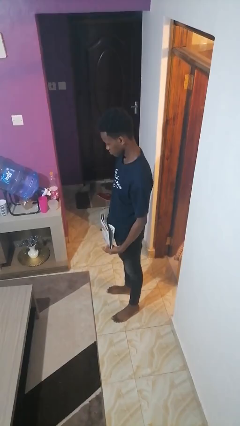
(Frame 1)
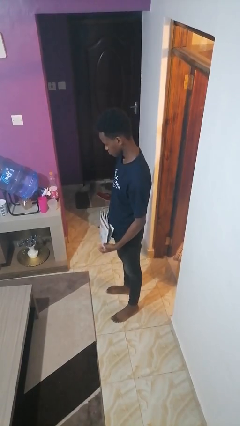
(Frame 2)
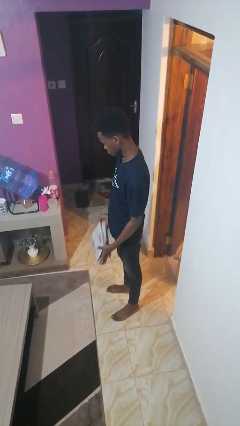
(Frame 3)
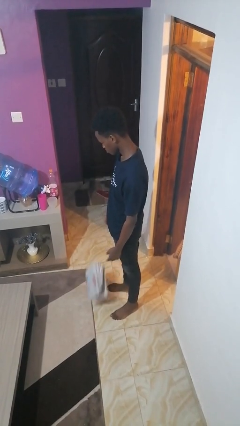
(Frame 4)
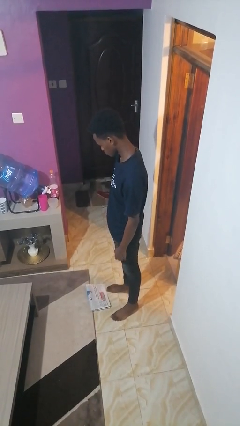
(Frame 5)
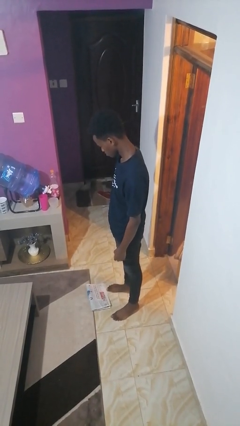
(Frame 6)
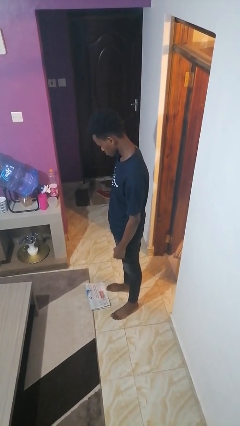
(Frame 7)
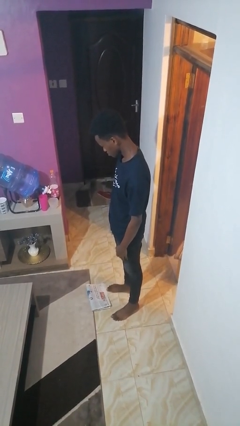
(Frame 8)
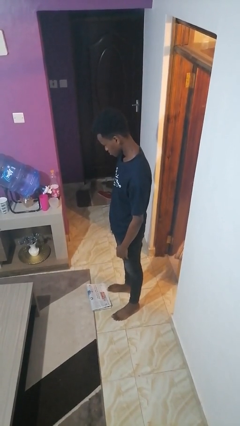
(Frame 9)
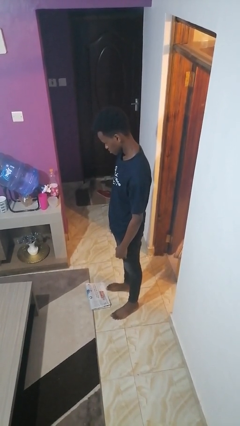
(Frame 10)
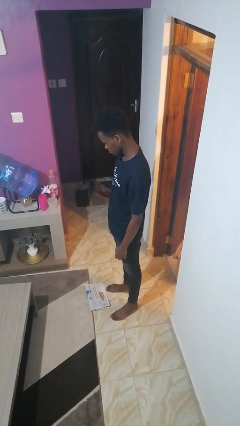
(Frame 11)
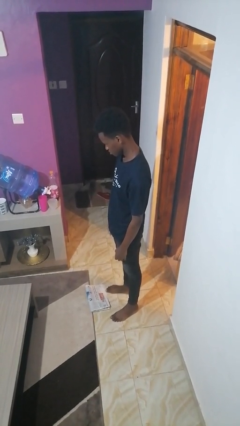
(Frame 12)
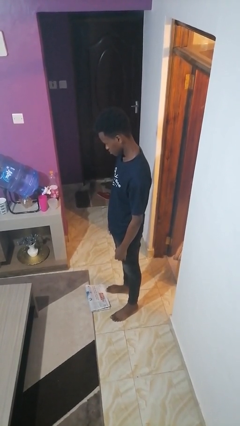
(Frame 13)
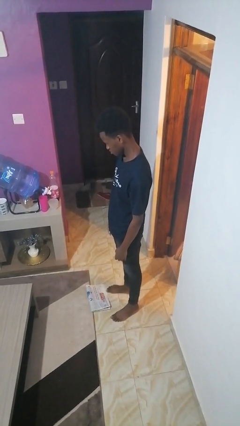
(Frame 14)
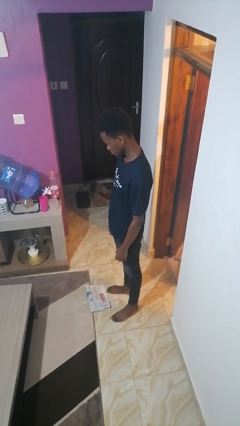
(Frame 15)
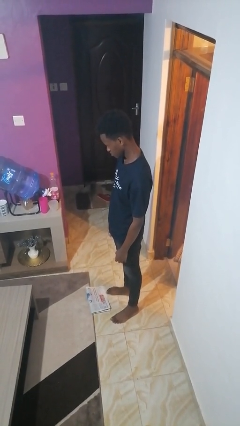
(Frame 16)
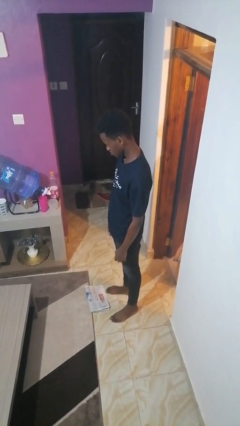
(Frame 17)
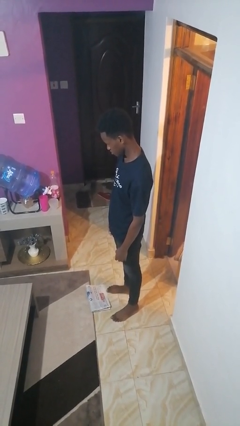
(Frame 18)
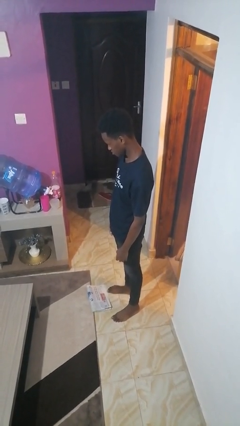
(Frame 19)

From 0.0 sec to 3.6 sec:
person drops object

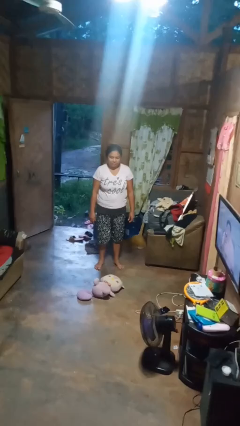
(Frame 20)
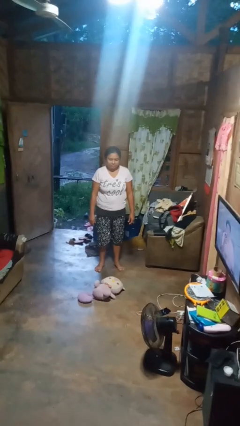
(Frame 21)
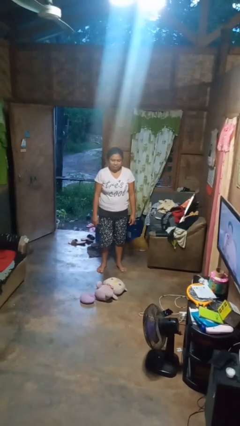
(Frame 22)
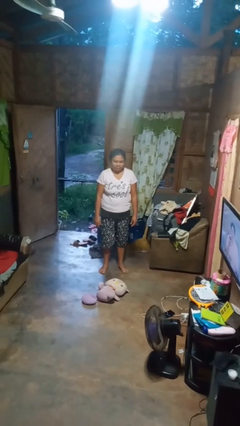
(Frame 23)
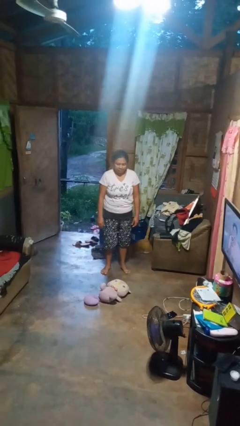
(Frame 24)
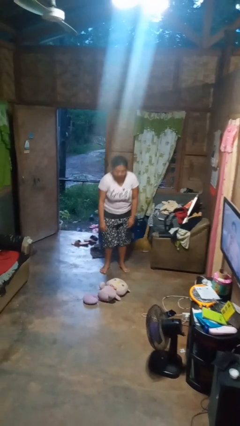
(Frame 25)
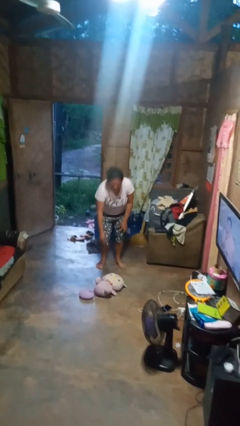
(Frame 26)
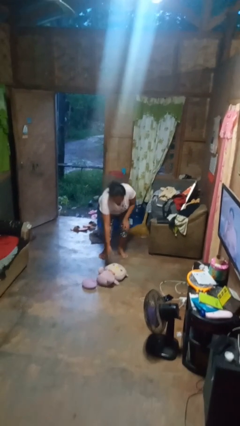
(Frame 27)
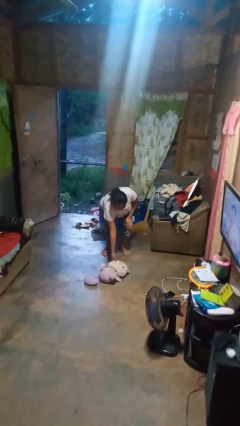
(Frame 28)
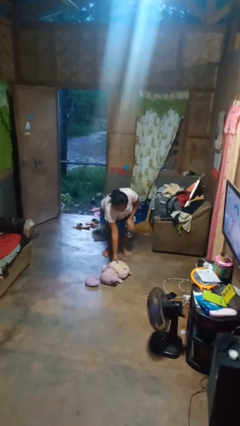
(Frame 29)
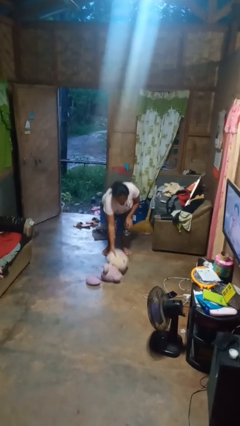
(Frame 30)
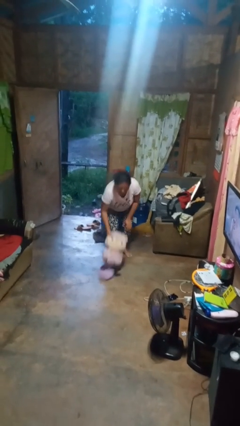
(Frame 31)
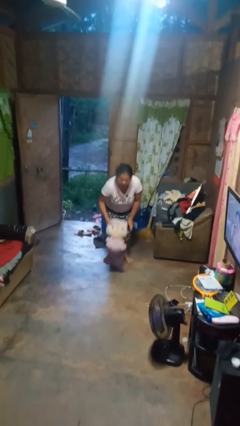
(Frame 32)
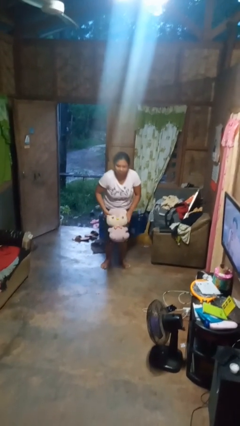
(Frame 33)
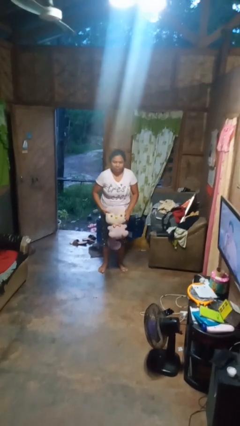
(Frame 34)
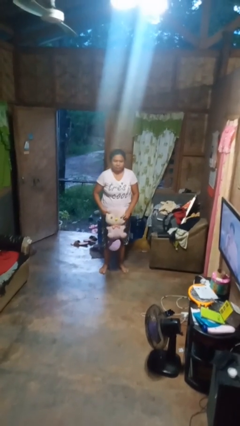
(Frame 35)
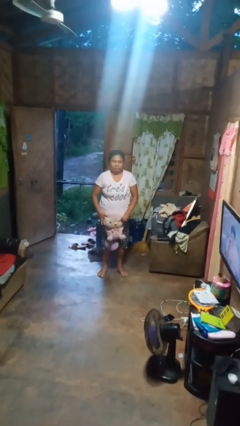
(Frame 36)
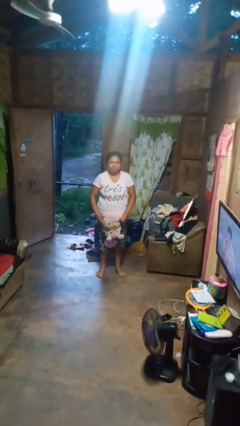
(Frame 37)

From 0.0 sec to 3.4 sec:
person picks up object from floor

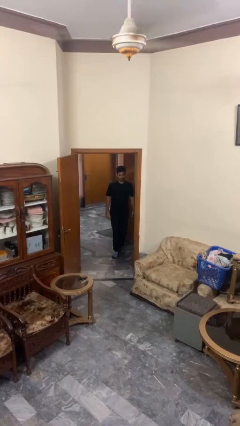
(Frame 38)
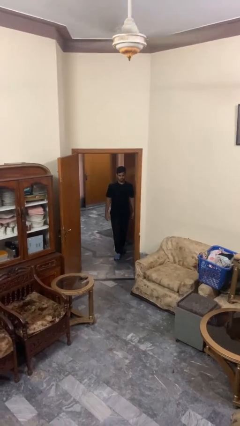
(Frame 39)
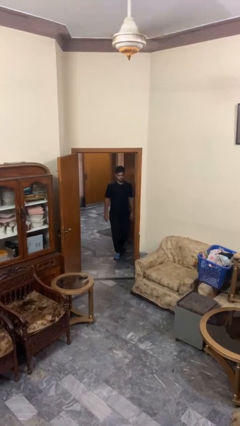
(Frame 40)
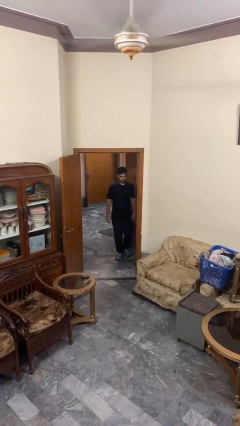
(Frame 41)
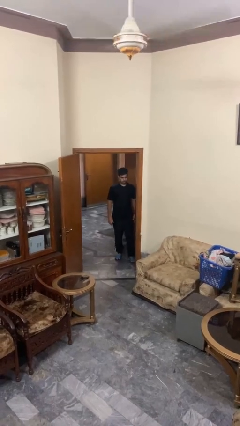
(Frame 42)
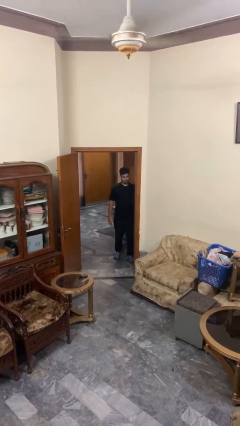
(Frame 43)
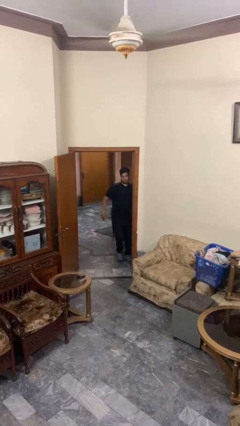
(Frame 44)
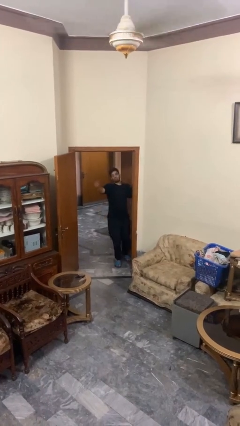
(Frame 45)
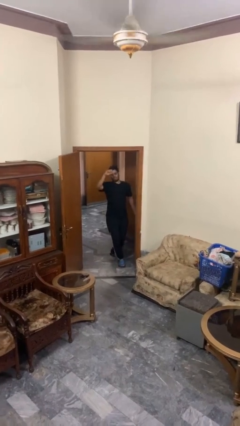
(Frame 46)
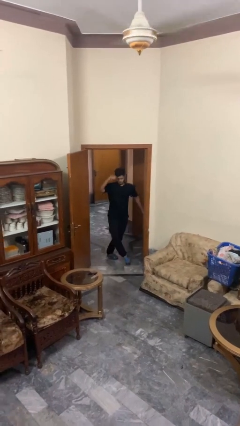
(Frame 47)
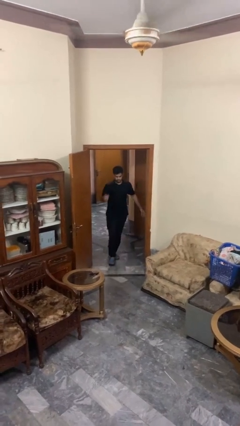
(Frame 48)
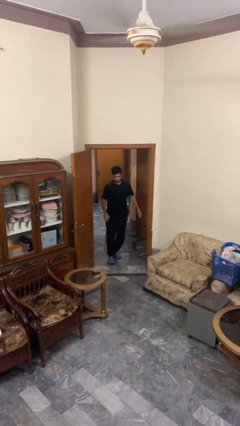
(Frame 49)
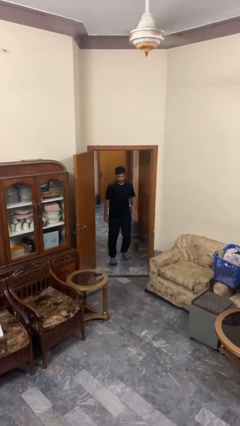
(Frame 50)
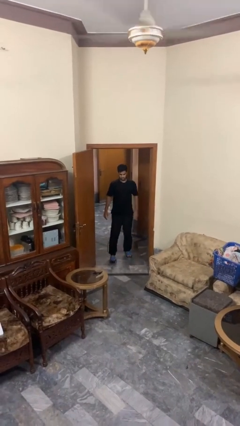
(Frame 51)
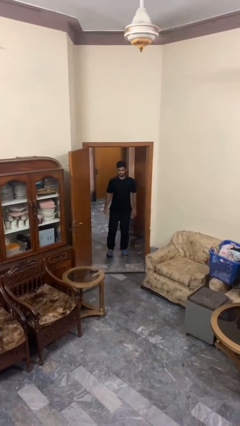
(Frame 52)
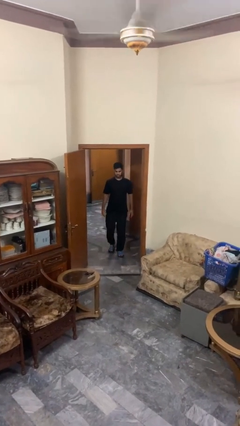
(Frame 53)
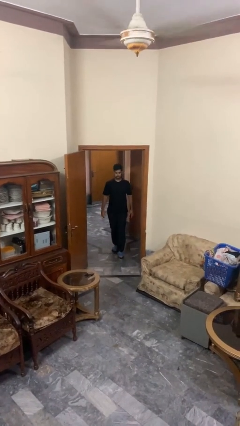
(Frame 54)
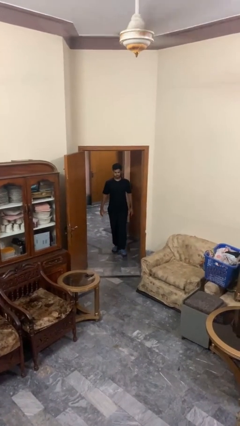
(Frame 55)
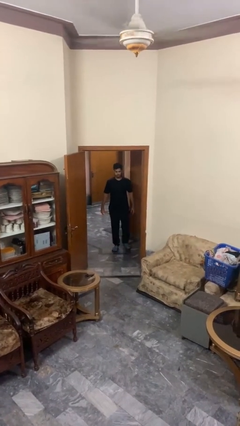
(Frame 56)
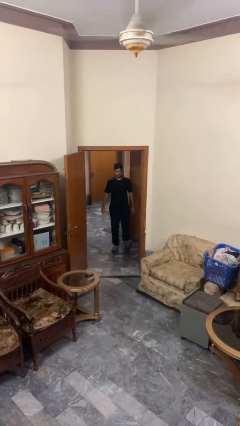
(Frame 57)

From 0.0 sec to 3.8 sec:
person bumps into wall

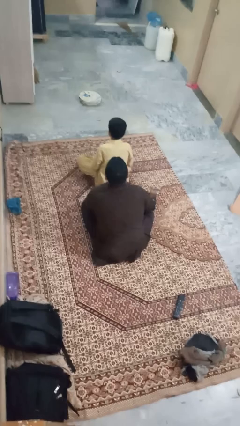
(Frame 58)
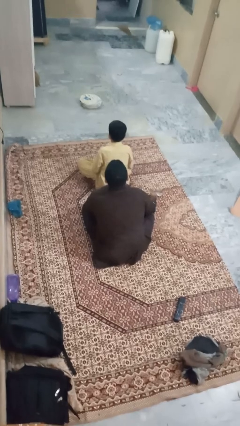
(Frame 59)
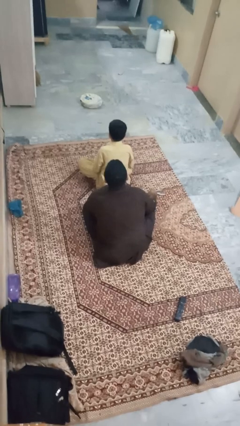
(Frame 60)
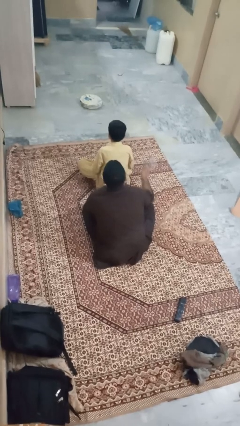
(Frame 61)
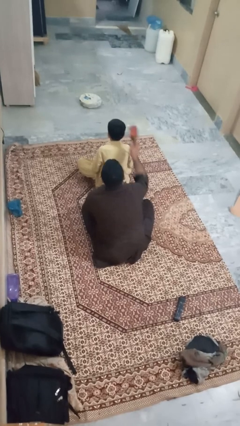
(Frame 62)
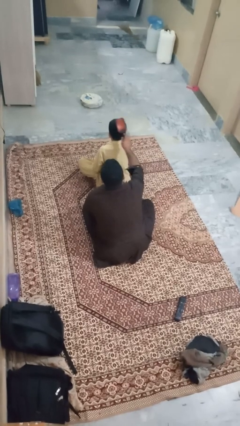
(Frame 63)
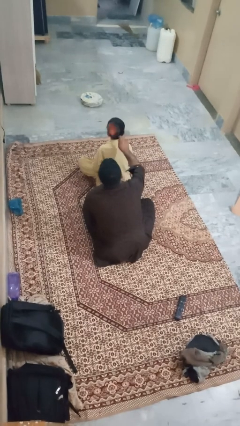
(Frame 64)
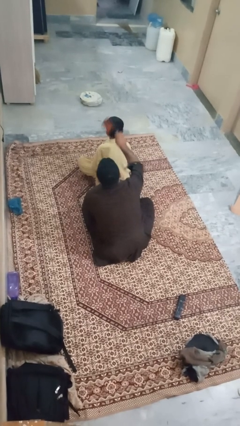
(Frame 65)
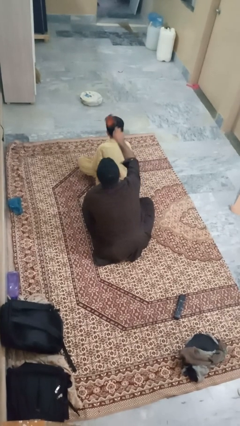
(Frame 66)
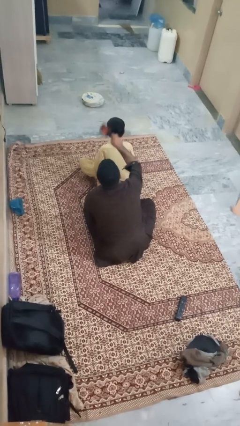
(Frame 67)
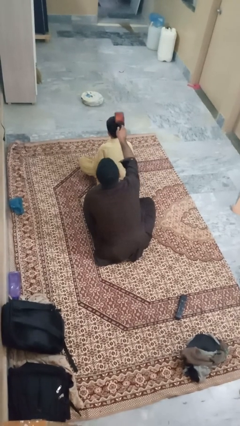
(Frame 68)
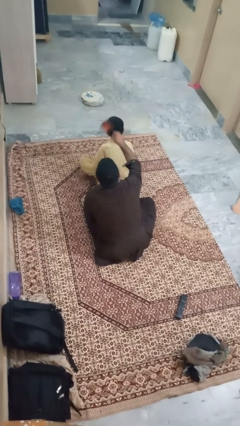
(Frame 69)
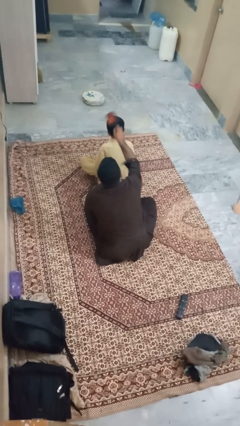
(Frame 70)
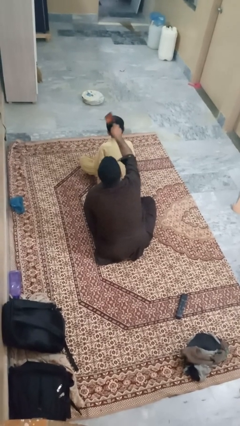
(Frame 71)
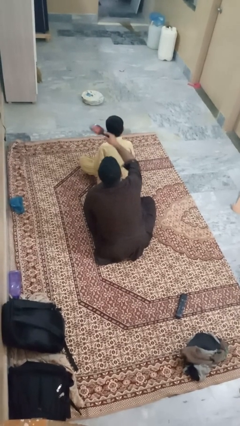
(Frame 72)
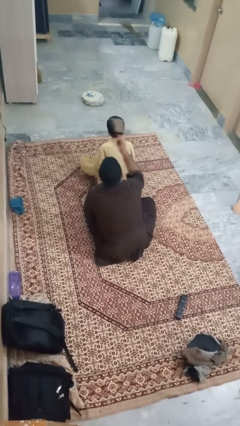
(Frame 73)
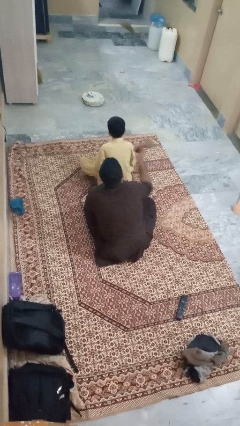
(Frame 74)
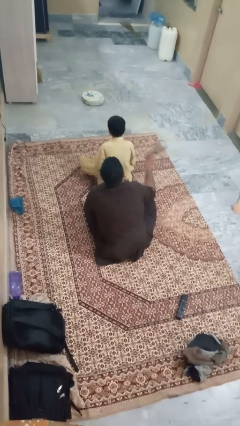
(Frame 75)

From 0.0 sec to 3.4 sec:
person brushes hair of person

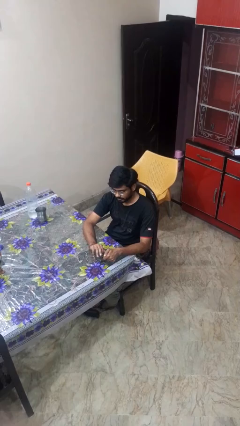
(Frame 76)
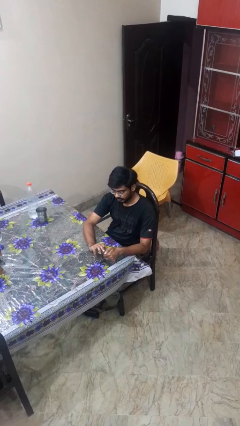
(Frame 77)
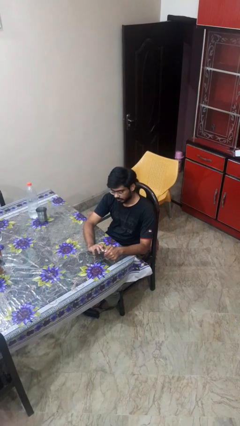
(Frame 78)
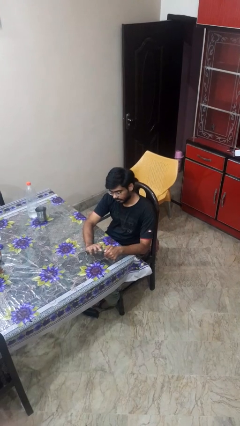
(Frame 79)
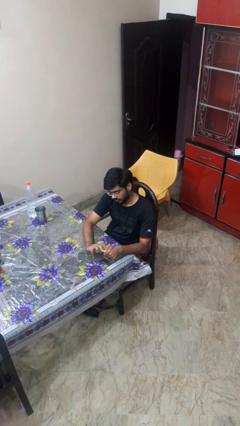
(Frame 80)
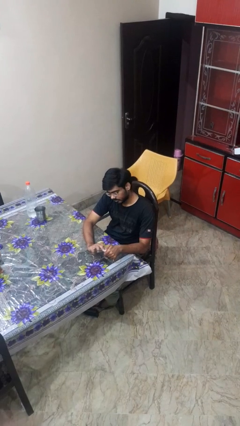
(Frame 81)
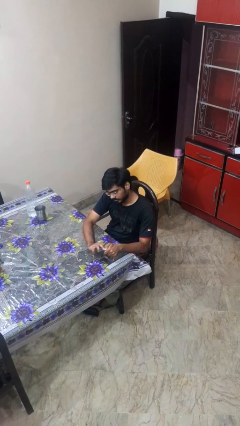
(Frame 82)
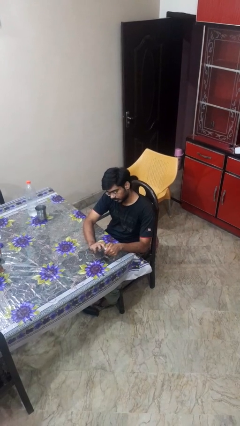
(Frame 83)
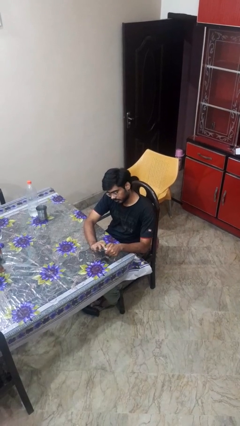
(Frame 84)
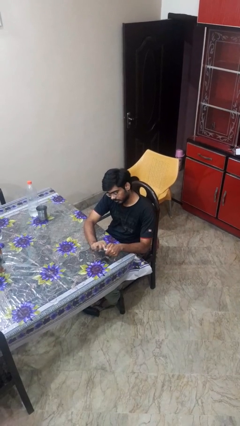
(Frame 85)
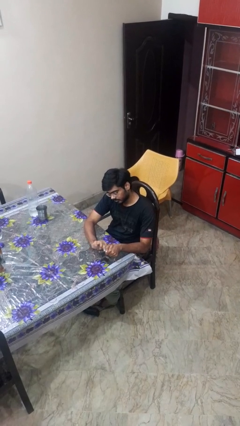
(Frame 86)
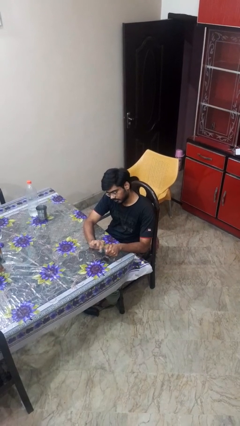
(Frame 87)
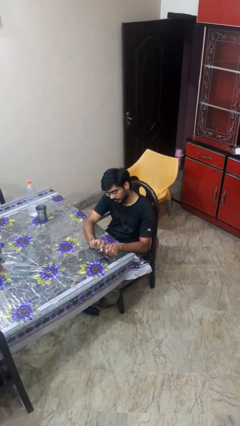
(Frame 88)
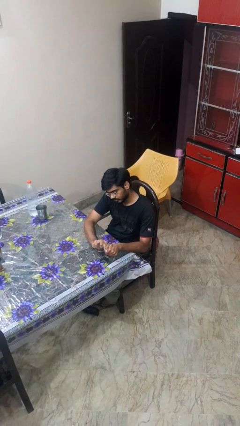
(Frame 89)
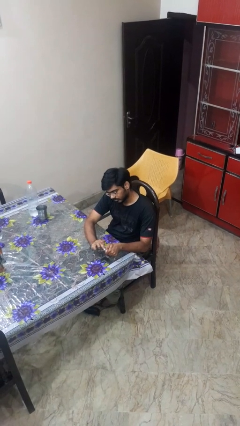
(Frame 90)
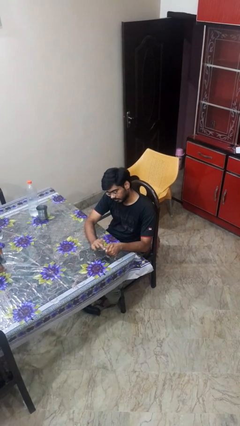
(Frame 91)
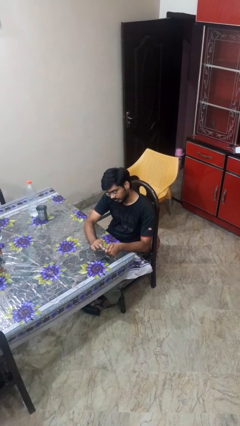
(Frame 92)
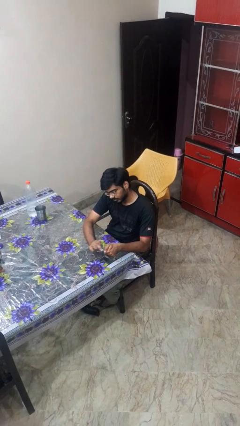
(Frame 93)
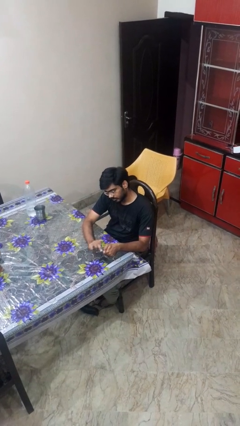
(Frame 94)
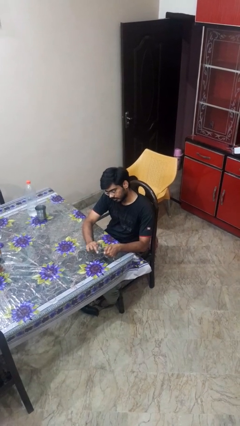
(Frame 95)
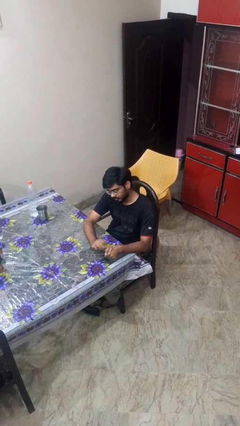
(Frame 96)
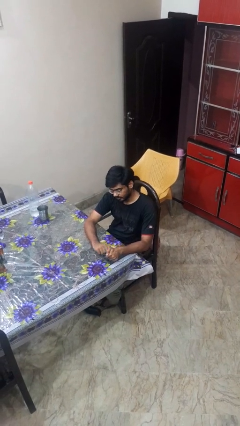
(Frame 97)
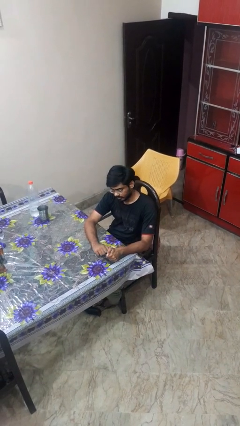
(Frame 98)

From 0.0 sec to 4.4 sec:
person files fingernails
